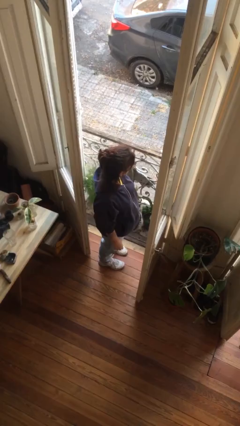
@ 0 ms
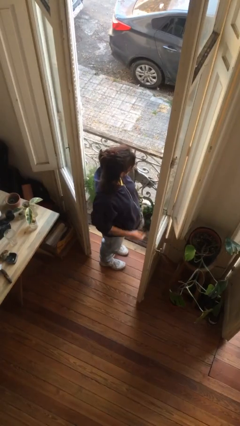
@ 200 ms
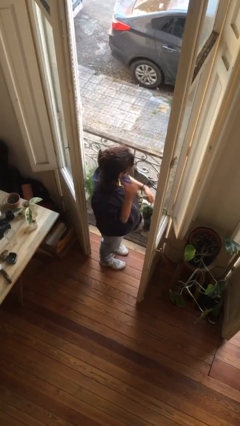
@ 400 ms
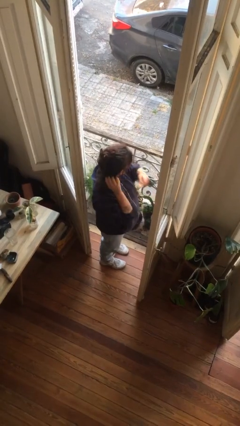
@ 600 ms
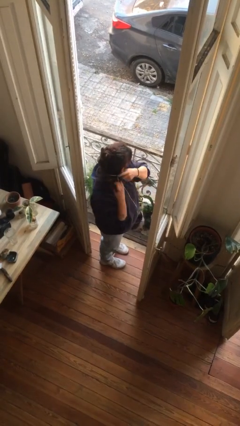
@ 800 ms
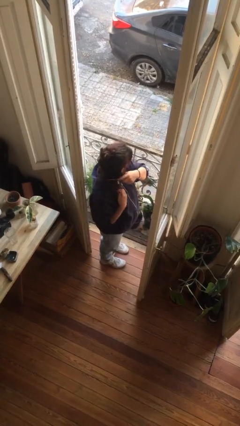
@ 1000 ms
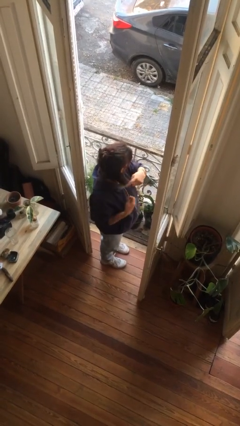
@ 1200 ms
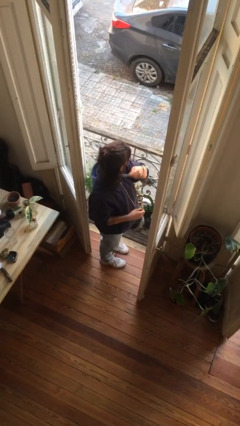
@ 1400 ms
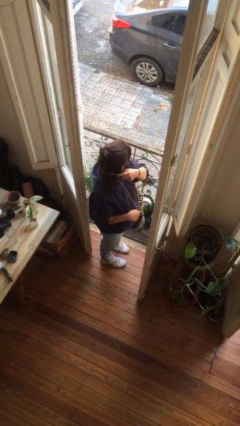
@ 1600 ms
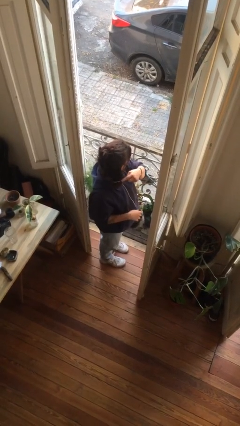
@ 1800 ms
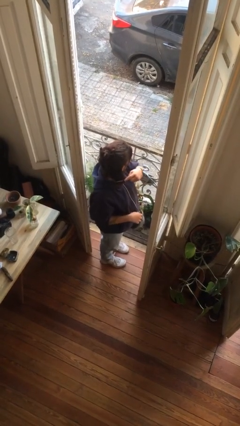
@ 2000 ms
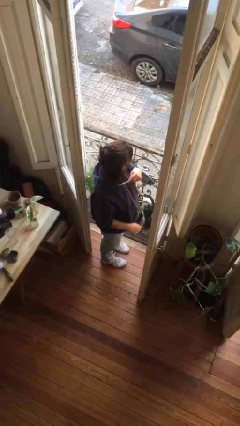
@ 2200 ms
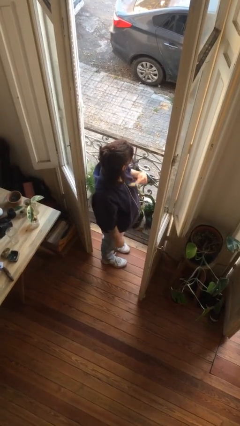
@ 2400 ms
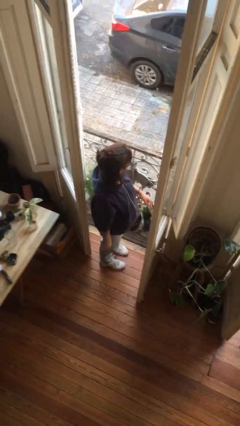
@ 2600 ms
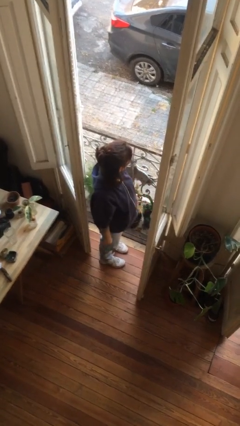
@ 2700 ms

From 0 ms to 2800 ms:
person brushes hair

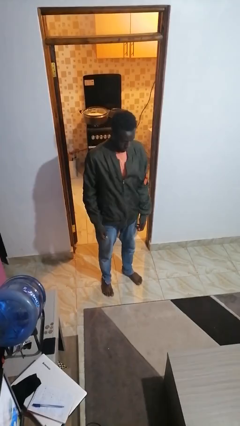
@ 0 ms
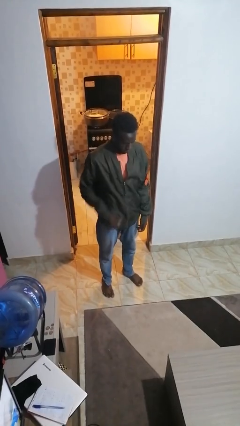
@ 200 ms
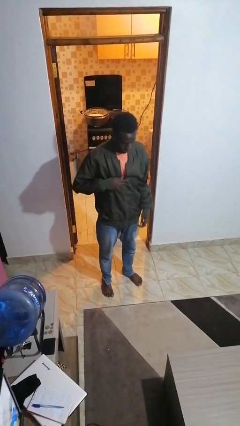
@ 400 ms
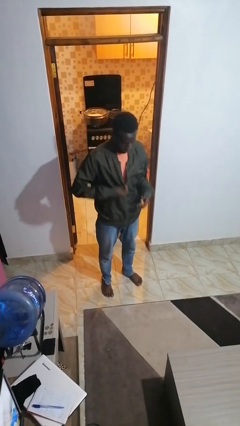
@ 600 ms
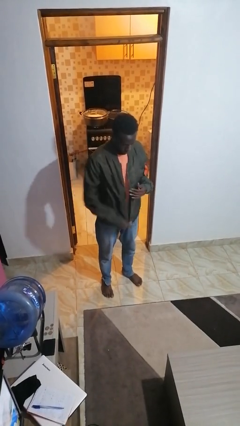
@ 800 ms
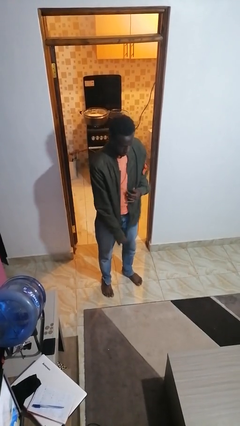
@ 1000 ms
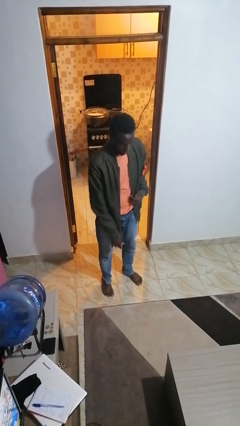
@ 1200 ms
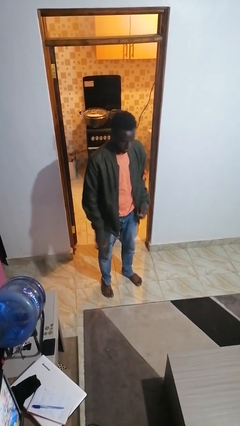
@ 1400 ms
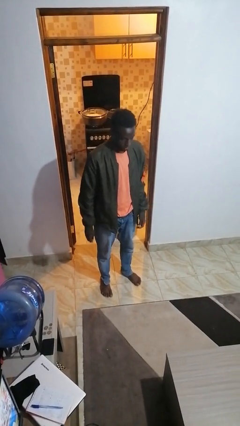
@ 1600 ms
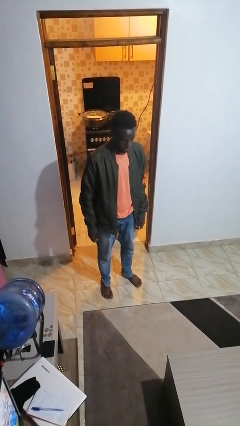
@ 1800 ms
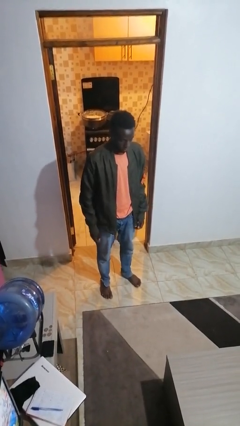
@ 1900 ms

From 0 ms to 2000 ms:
person unzips jacket

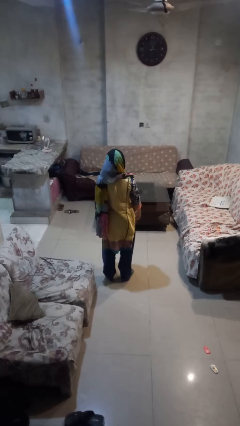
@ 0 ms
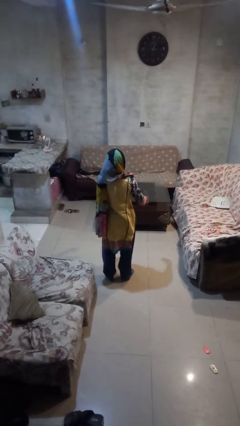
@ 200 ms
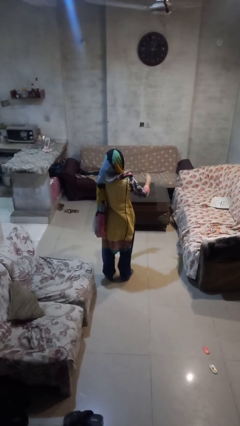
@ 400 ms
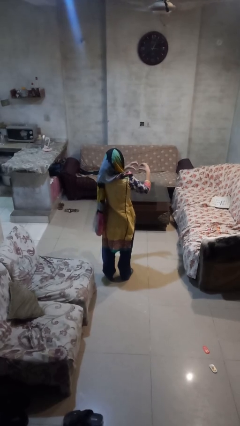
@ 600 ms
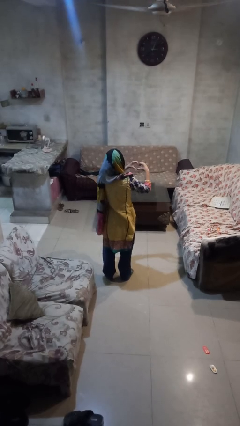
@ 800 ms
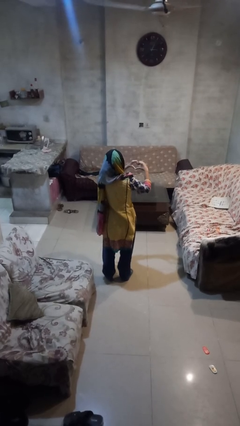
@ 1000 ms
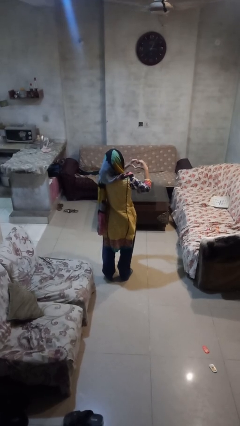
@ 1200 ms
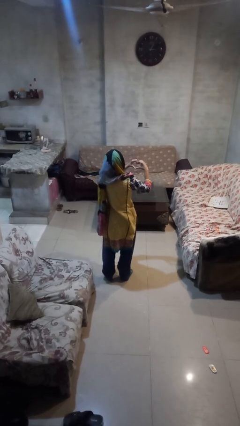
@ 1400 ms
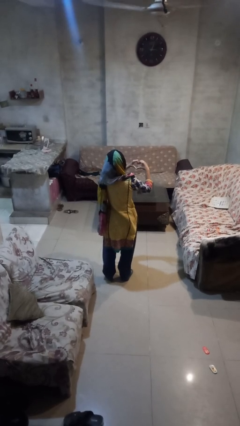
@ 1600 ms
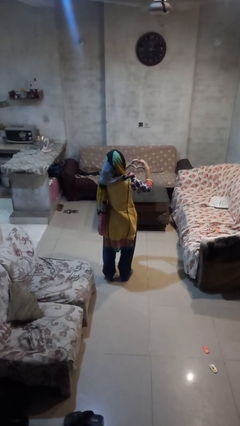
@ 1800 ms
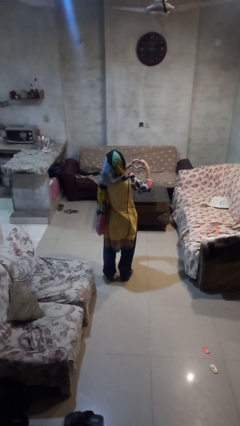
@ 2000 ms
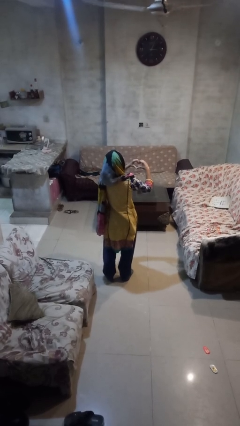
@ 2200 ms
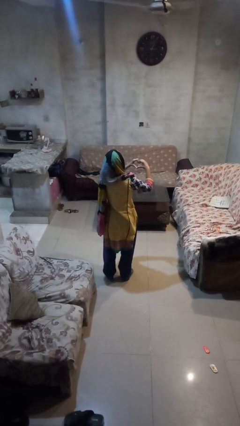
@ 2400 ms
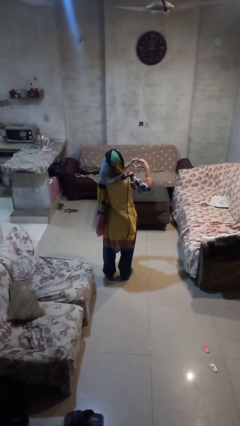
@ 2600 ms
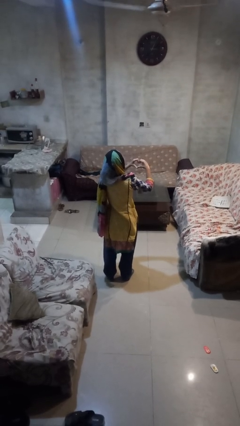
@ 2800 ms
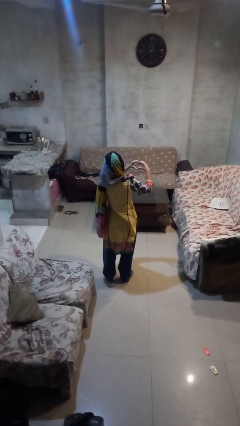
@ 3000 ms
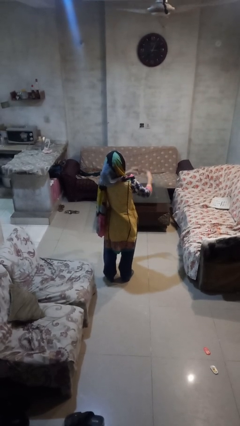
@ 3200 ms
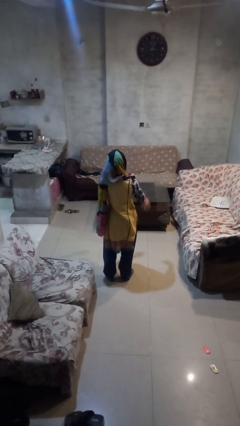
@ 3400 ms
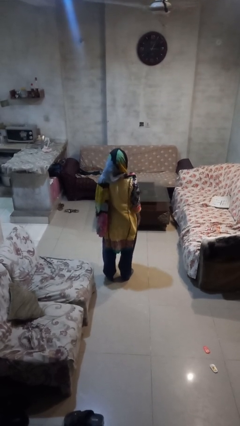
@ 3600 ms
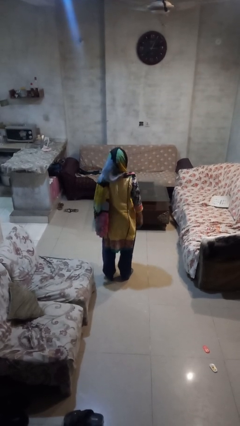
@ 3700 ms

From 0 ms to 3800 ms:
person gestures heart

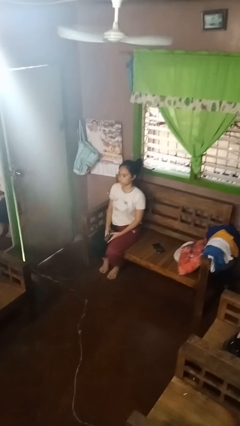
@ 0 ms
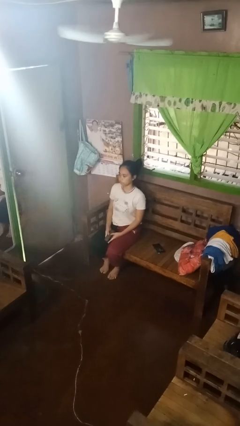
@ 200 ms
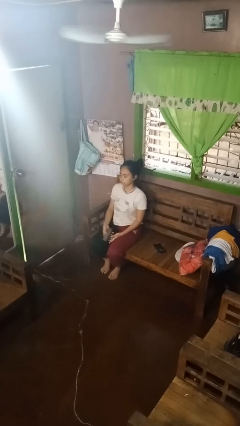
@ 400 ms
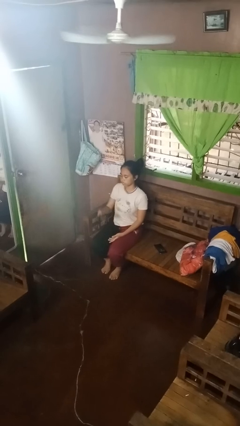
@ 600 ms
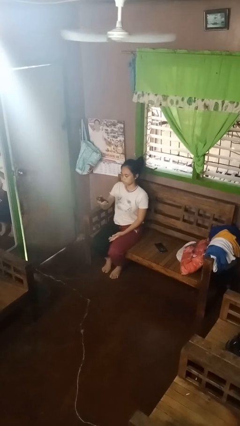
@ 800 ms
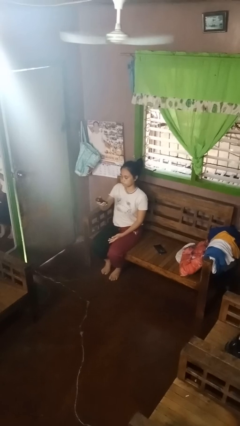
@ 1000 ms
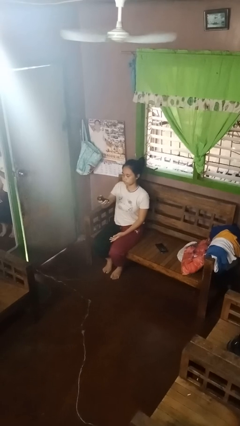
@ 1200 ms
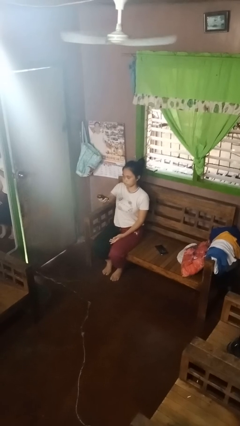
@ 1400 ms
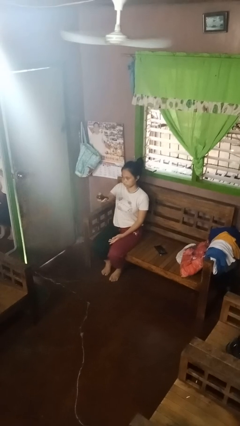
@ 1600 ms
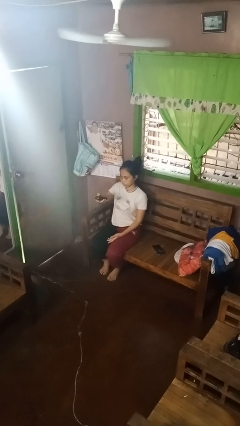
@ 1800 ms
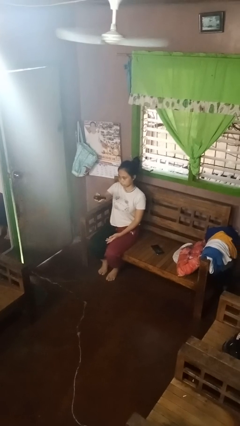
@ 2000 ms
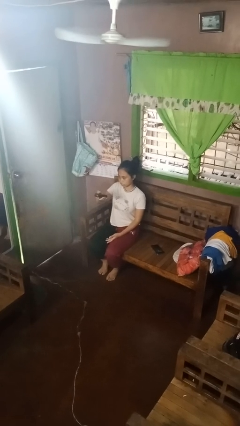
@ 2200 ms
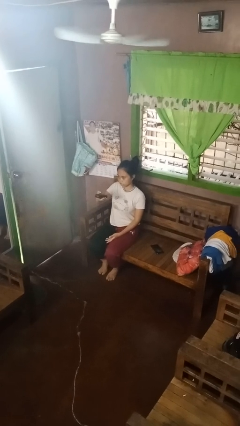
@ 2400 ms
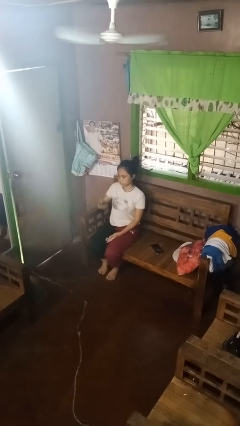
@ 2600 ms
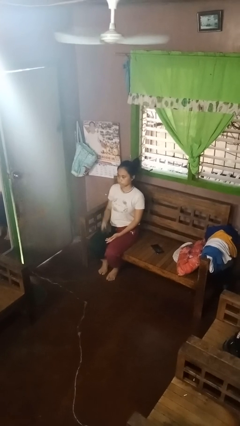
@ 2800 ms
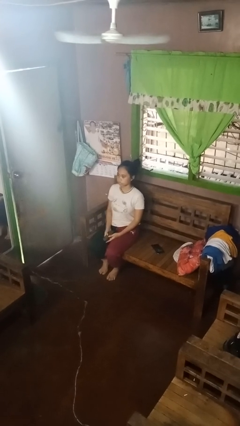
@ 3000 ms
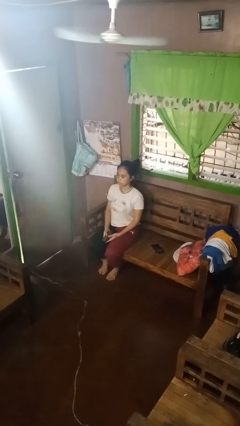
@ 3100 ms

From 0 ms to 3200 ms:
person uses television remote

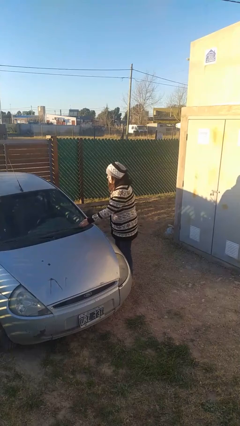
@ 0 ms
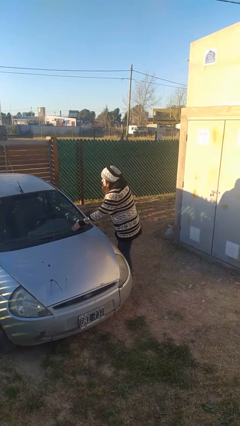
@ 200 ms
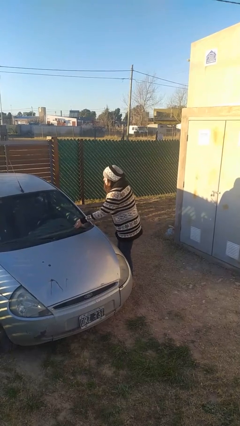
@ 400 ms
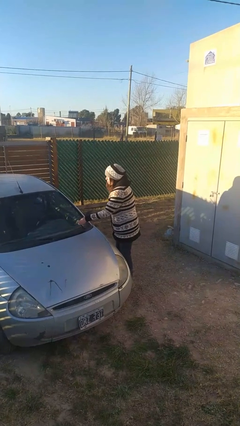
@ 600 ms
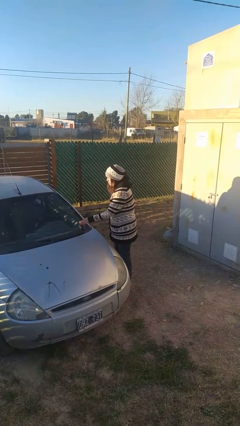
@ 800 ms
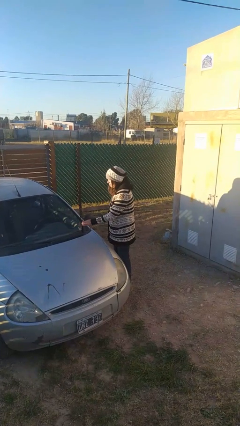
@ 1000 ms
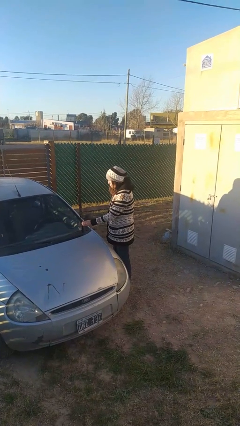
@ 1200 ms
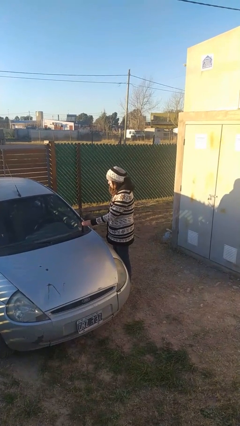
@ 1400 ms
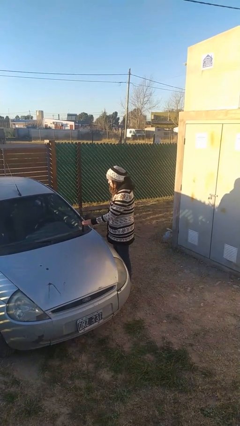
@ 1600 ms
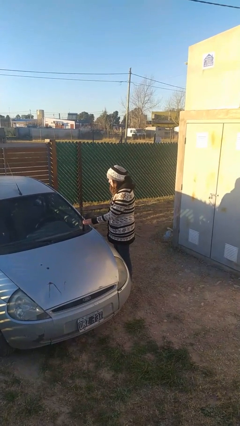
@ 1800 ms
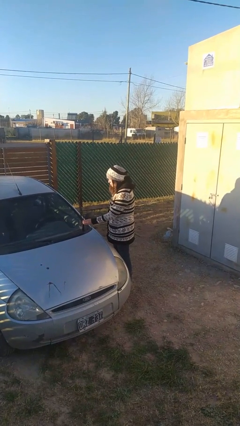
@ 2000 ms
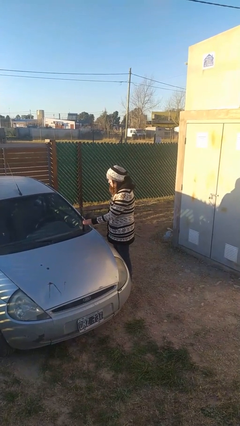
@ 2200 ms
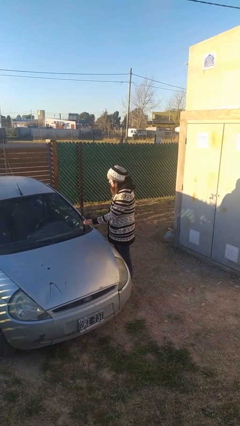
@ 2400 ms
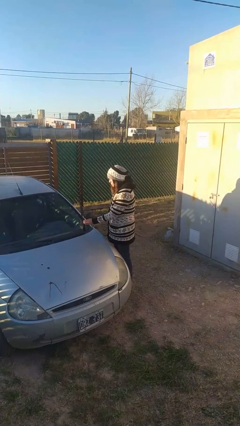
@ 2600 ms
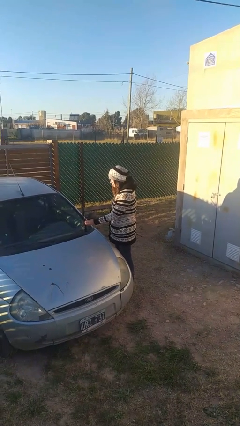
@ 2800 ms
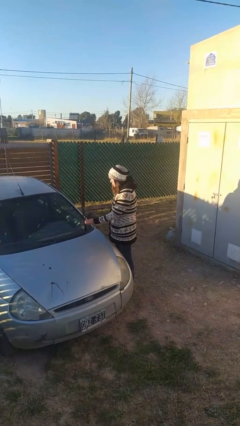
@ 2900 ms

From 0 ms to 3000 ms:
person flips up car wipers

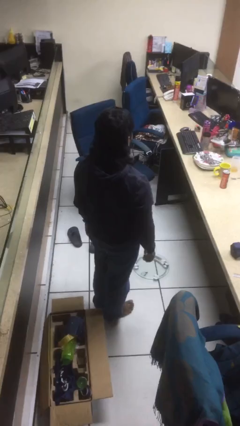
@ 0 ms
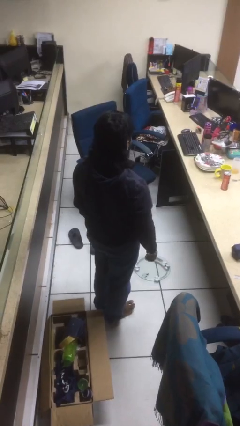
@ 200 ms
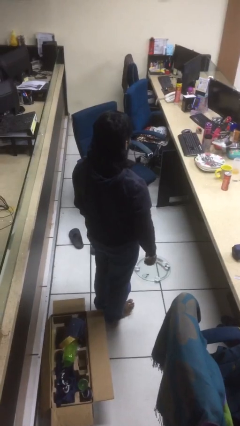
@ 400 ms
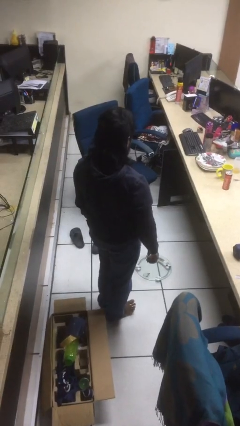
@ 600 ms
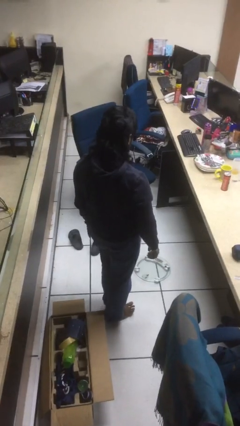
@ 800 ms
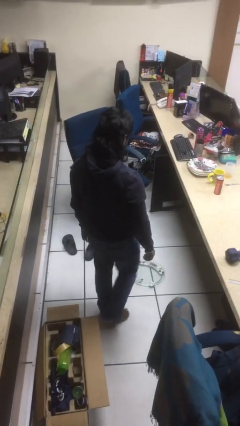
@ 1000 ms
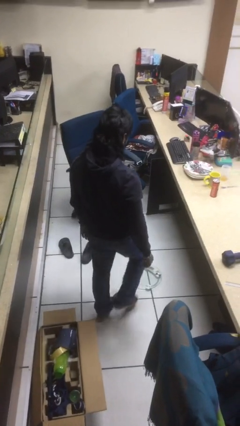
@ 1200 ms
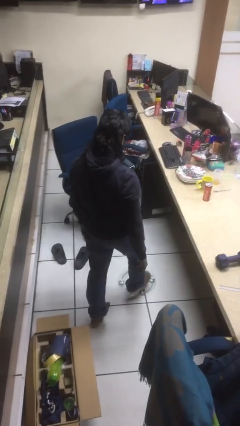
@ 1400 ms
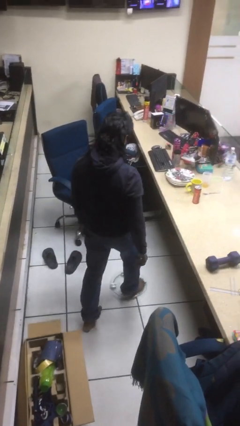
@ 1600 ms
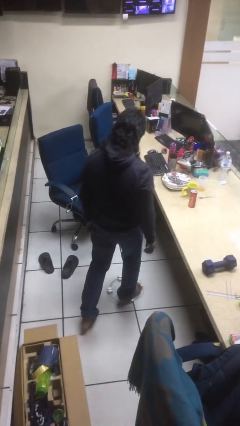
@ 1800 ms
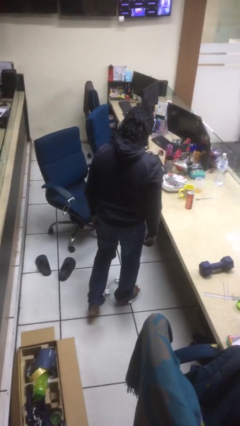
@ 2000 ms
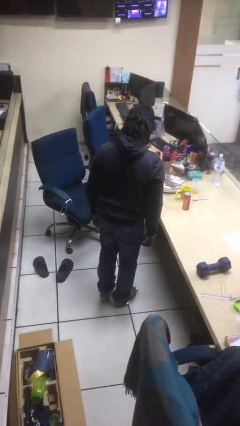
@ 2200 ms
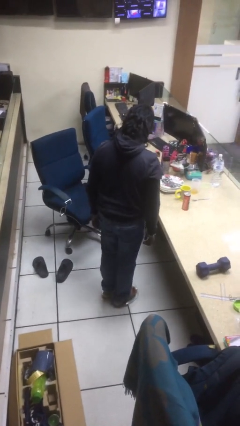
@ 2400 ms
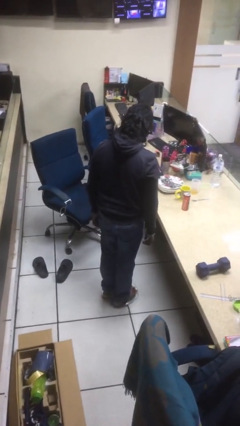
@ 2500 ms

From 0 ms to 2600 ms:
person uses bodyweight scale
